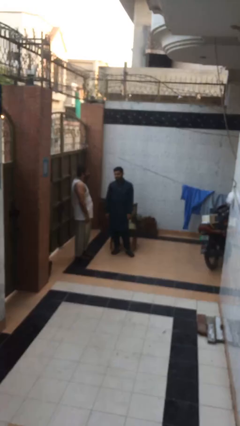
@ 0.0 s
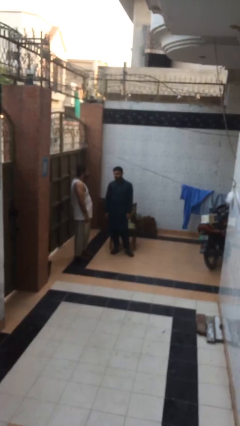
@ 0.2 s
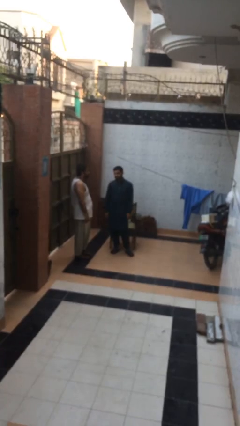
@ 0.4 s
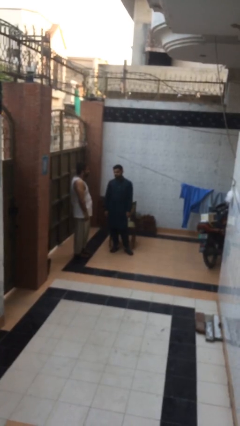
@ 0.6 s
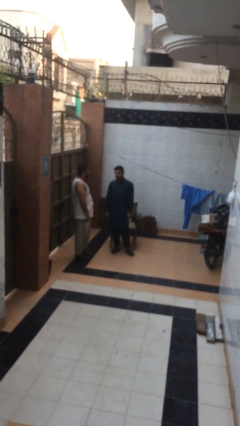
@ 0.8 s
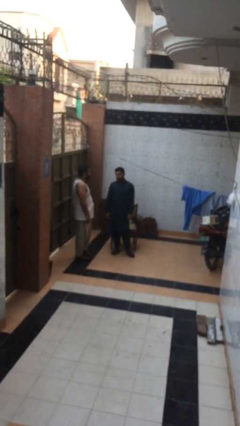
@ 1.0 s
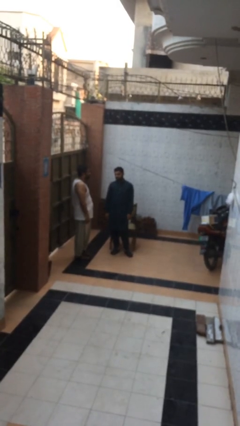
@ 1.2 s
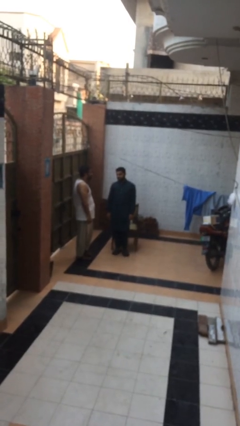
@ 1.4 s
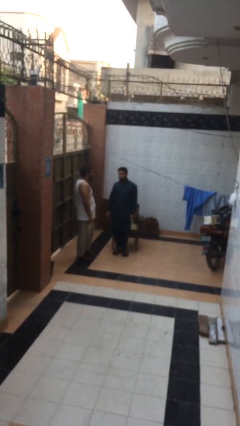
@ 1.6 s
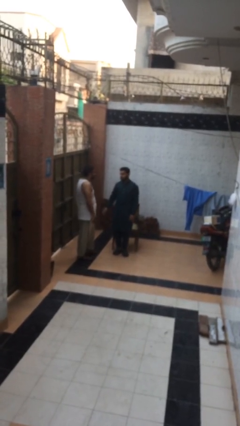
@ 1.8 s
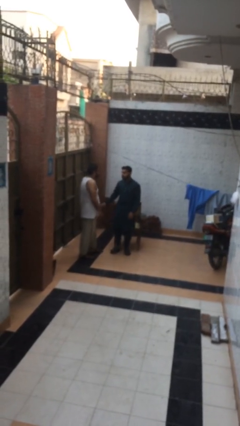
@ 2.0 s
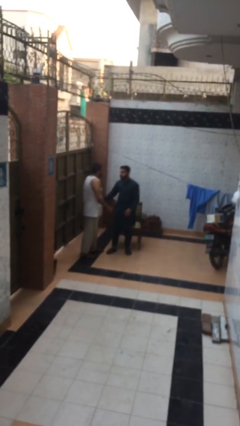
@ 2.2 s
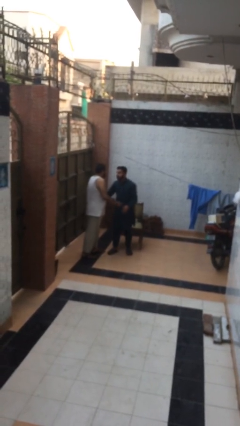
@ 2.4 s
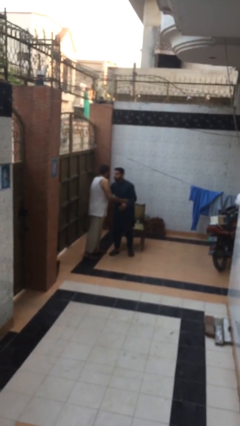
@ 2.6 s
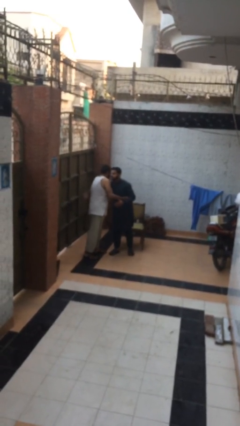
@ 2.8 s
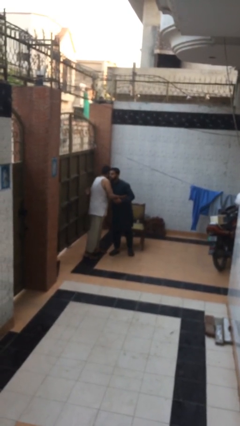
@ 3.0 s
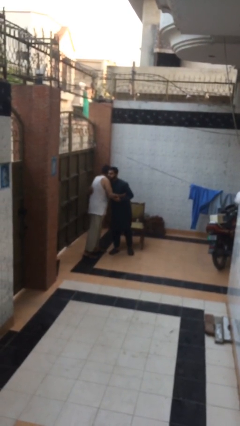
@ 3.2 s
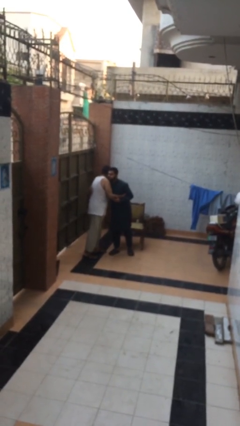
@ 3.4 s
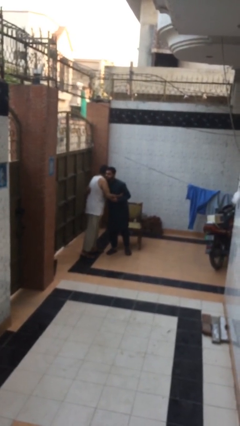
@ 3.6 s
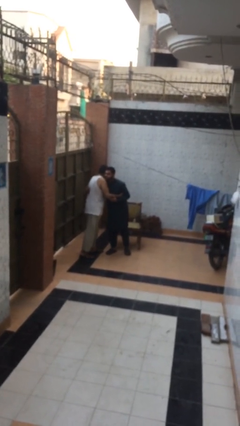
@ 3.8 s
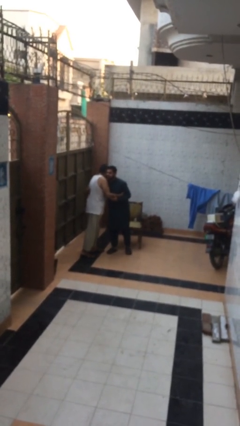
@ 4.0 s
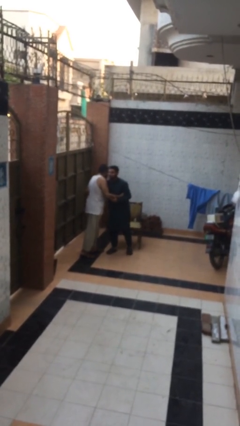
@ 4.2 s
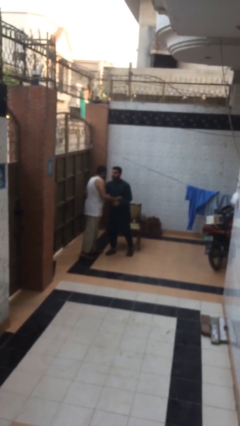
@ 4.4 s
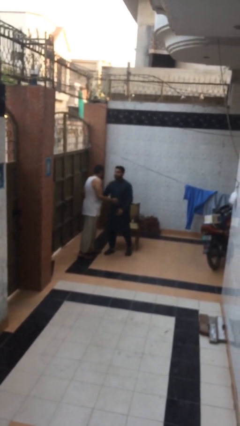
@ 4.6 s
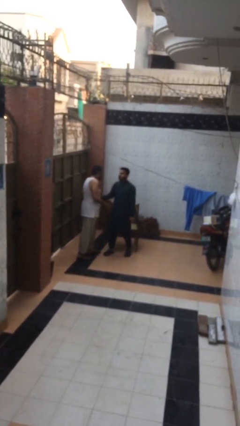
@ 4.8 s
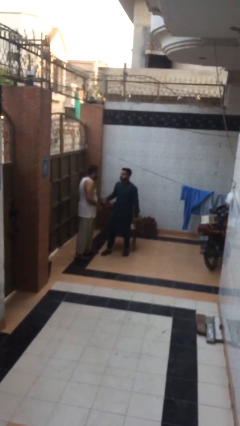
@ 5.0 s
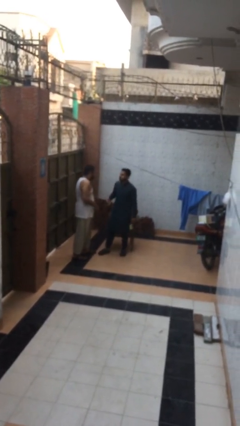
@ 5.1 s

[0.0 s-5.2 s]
person embraces person

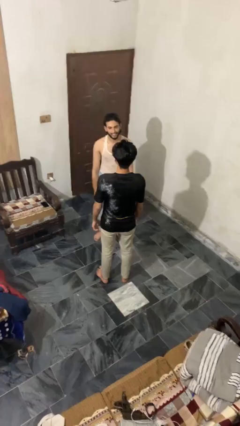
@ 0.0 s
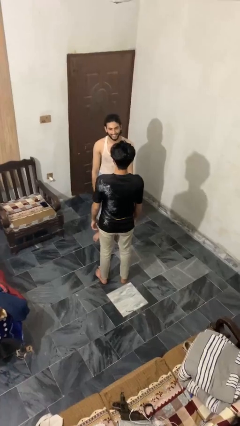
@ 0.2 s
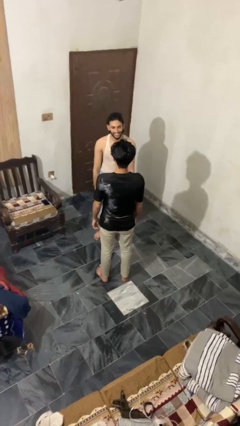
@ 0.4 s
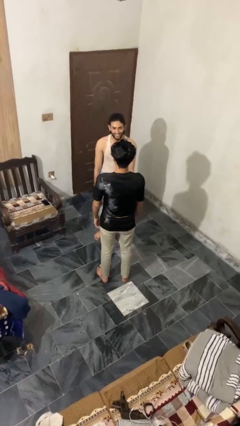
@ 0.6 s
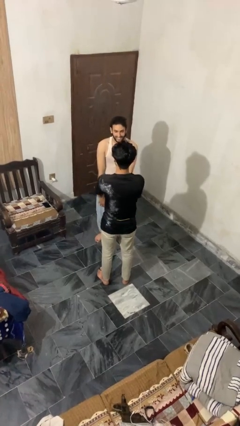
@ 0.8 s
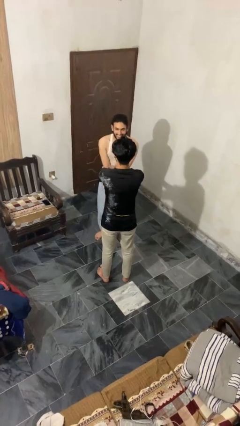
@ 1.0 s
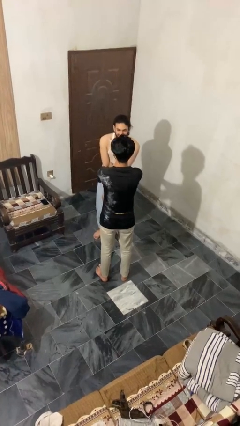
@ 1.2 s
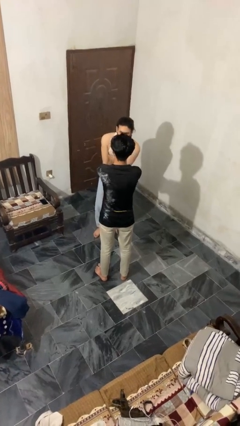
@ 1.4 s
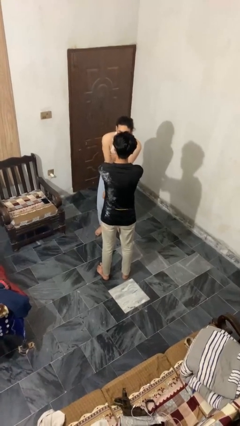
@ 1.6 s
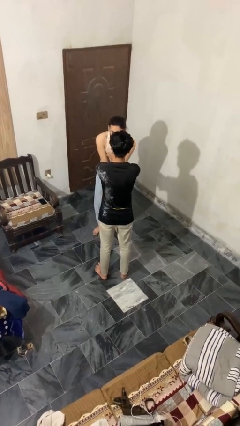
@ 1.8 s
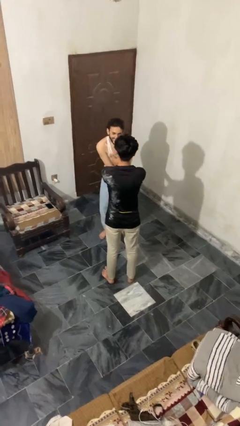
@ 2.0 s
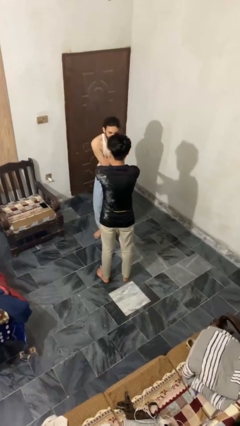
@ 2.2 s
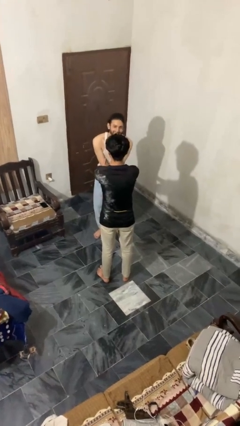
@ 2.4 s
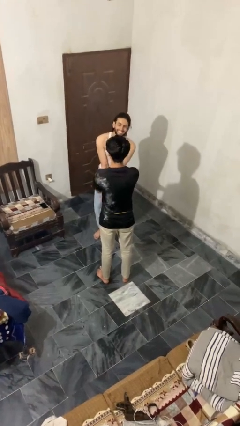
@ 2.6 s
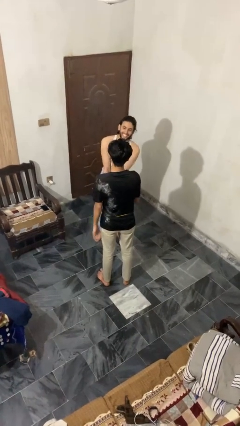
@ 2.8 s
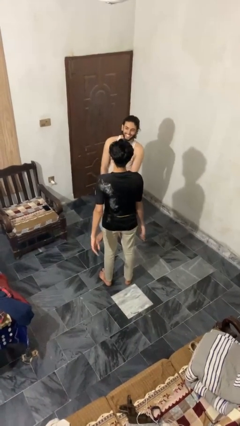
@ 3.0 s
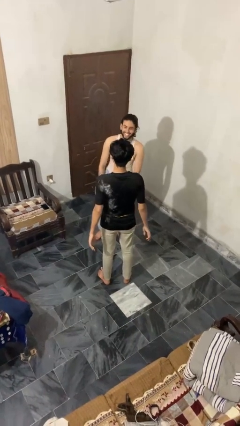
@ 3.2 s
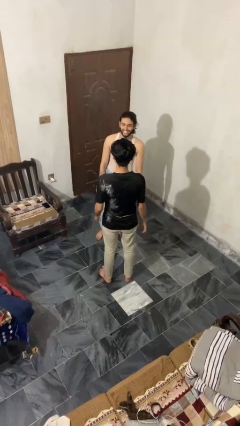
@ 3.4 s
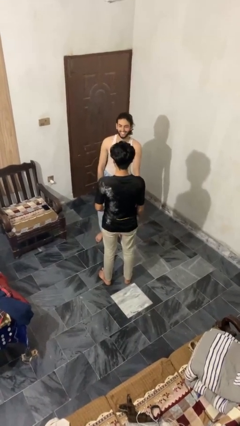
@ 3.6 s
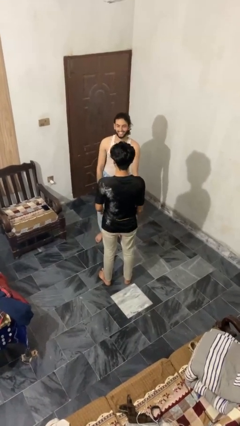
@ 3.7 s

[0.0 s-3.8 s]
person tickles person

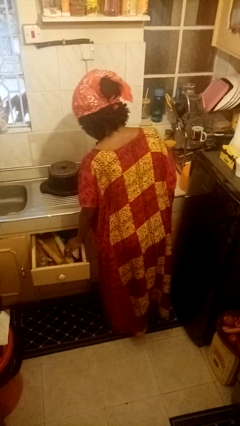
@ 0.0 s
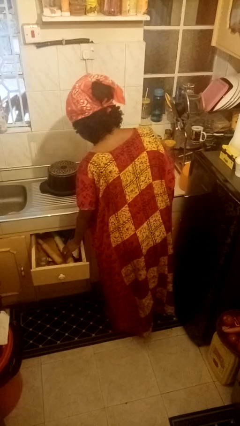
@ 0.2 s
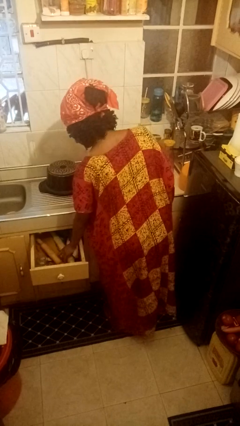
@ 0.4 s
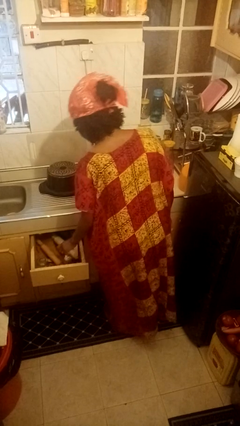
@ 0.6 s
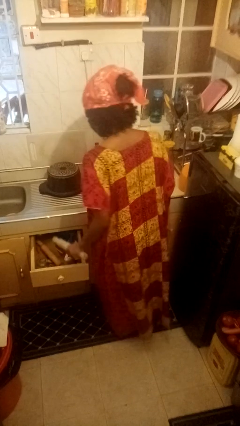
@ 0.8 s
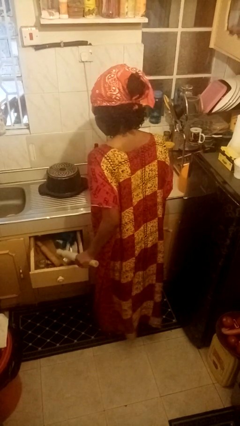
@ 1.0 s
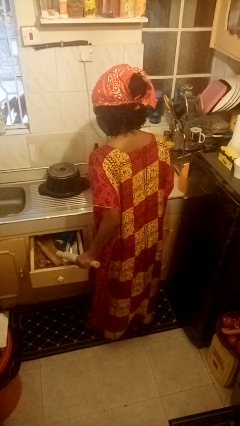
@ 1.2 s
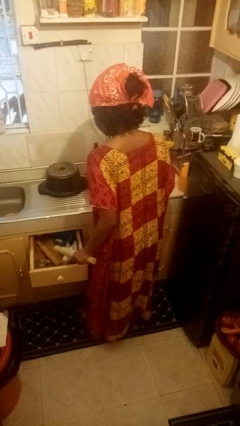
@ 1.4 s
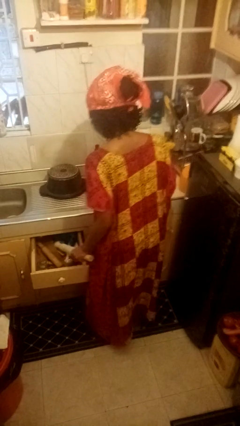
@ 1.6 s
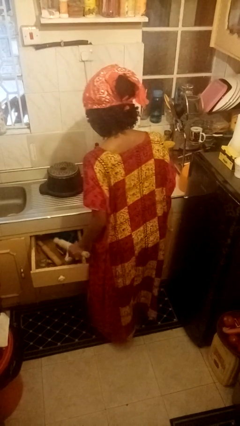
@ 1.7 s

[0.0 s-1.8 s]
person takes object from kitchen drawer

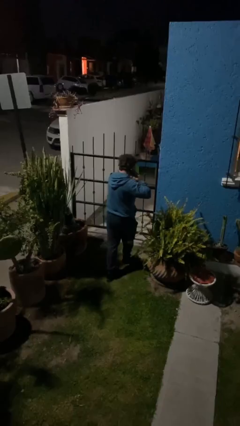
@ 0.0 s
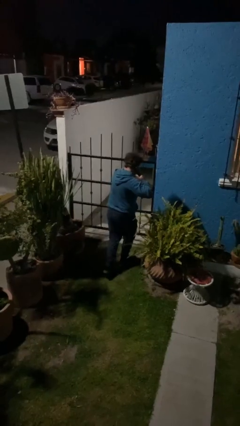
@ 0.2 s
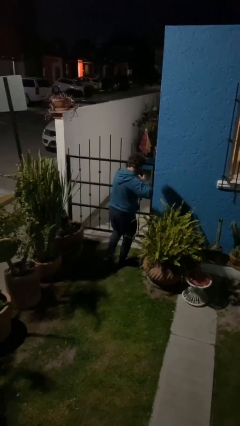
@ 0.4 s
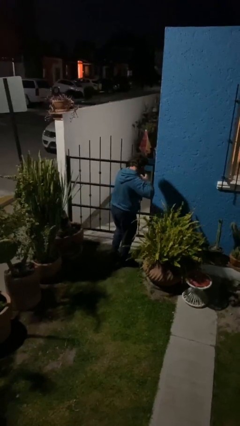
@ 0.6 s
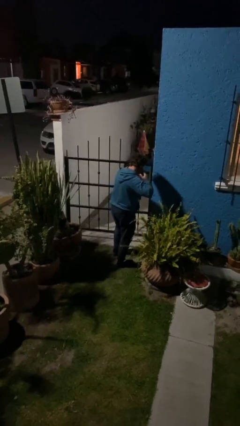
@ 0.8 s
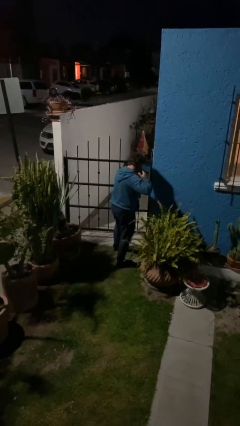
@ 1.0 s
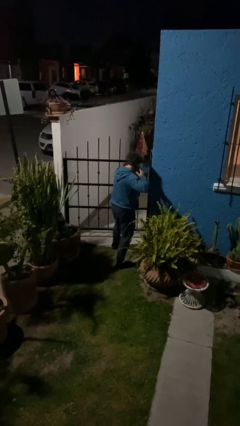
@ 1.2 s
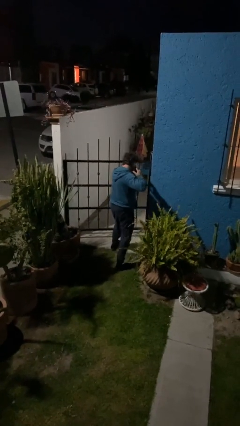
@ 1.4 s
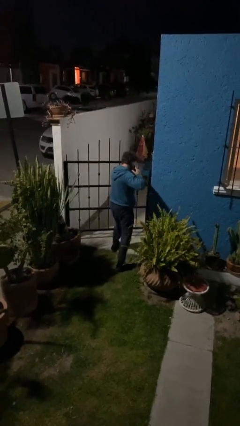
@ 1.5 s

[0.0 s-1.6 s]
person opens facility door

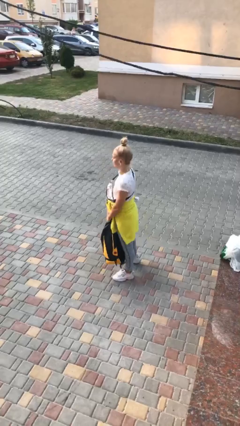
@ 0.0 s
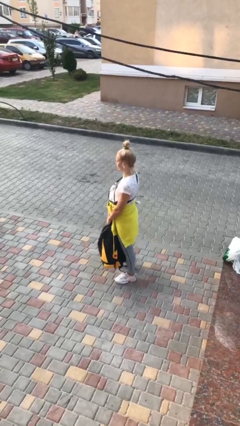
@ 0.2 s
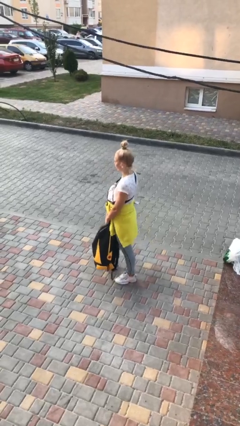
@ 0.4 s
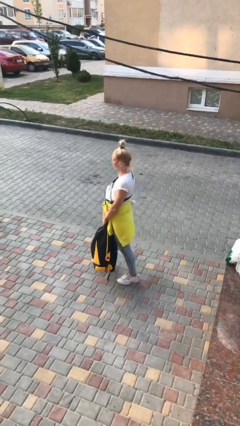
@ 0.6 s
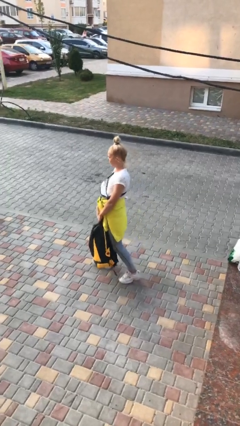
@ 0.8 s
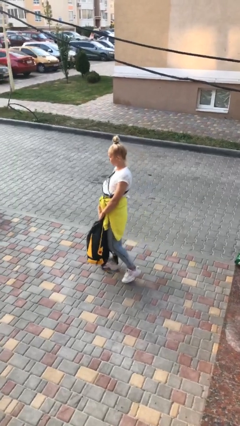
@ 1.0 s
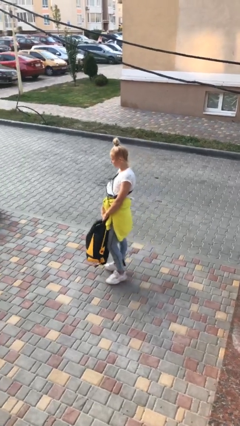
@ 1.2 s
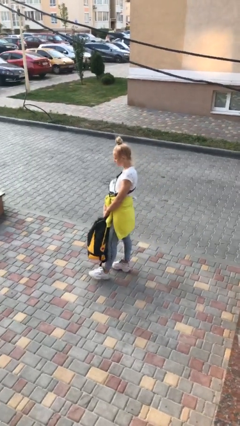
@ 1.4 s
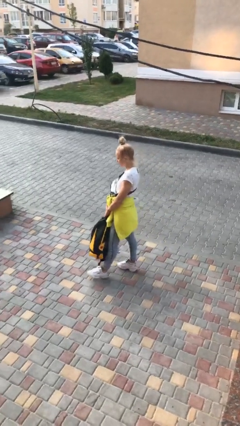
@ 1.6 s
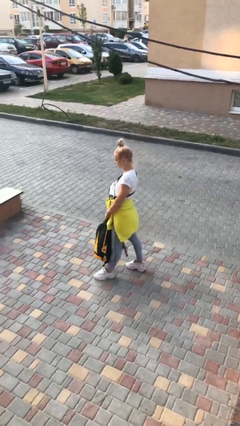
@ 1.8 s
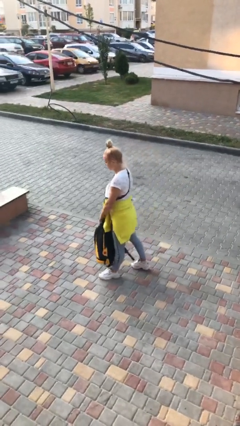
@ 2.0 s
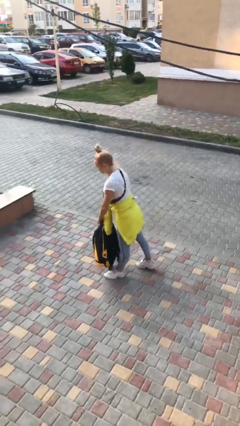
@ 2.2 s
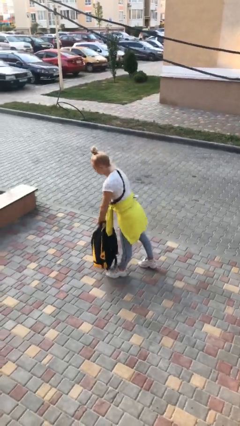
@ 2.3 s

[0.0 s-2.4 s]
person carries heavy object

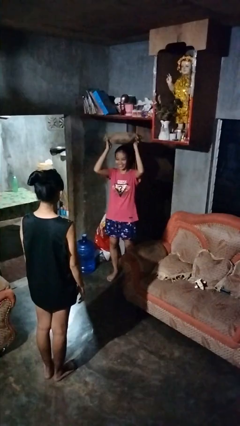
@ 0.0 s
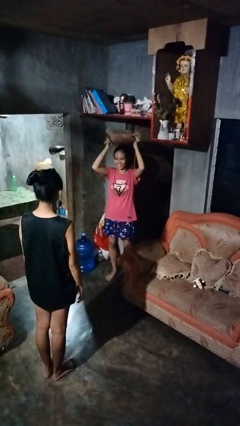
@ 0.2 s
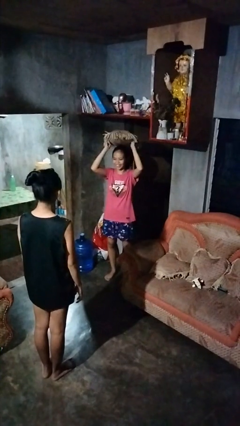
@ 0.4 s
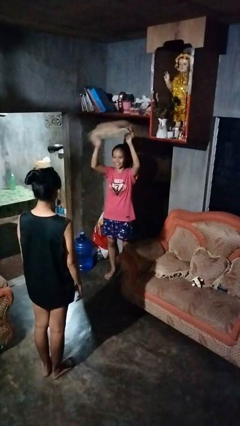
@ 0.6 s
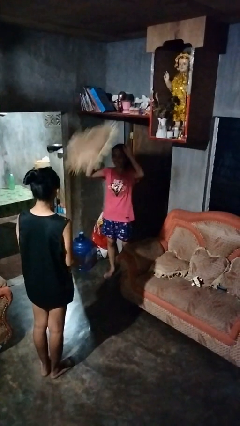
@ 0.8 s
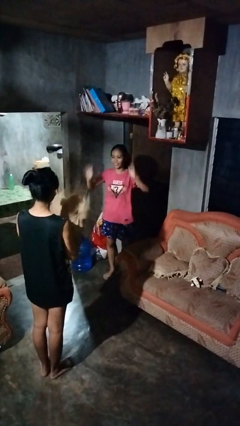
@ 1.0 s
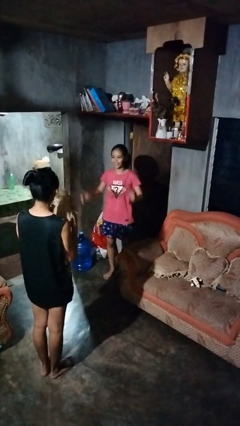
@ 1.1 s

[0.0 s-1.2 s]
person throws object to person

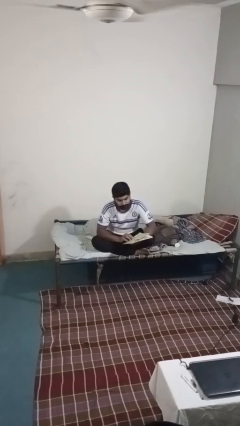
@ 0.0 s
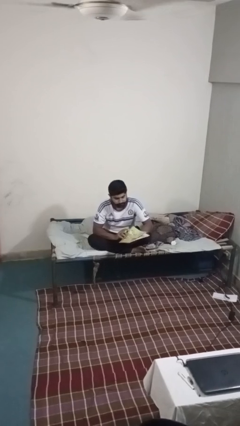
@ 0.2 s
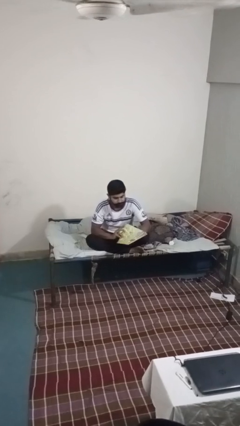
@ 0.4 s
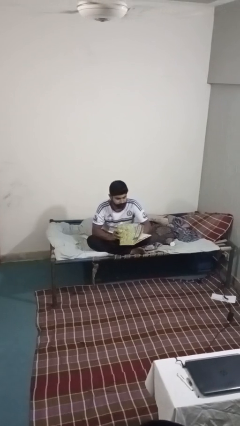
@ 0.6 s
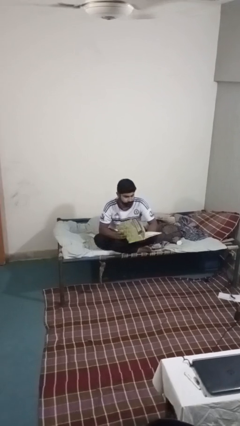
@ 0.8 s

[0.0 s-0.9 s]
person reads magazine
